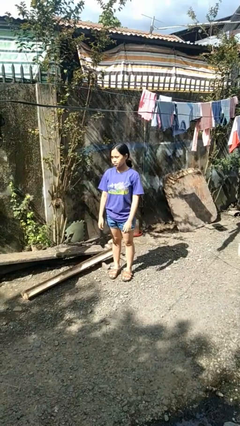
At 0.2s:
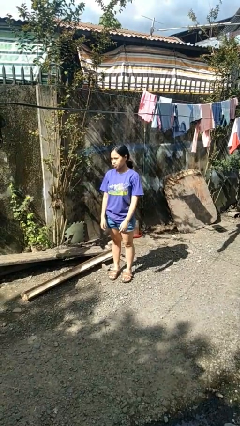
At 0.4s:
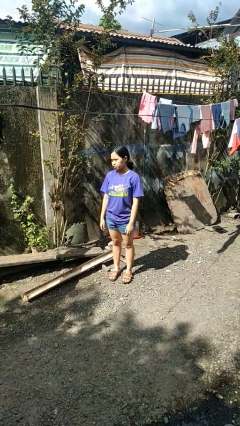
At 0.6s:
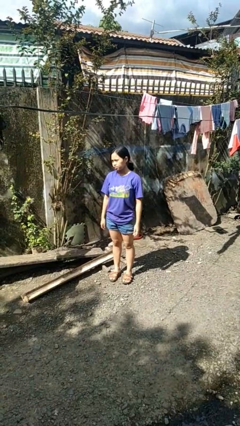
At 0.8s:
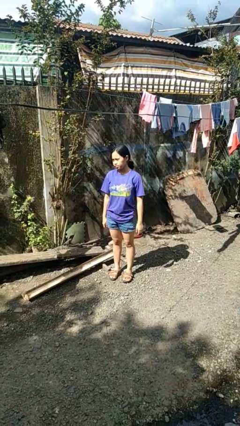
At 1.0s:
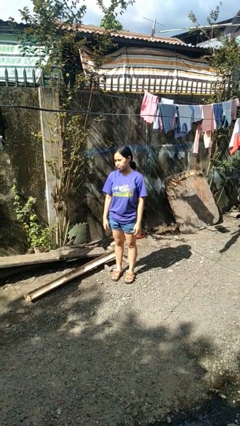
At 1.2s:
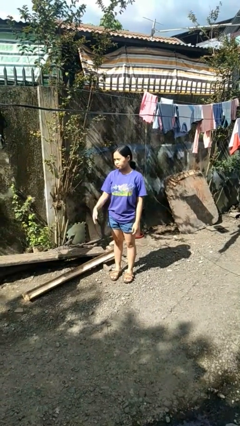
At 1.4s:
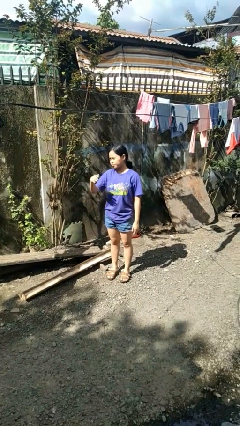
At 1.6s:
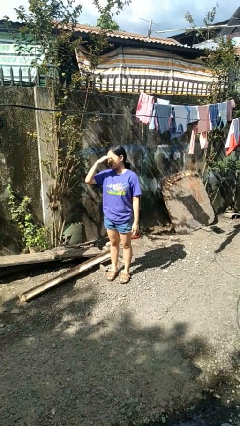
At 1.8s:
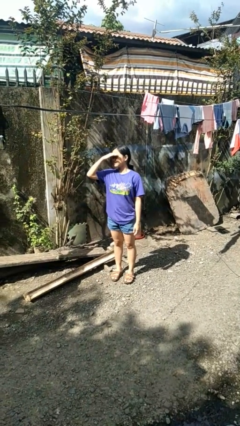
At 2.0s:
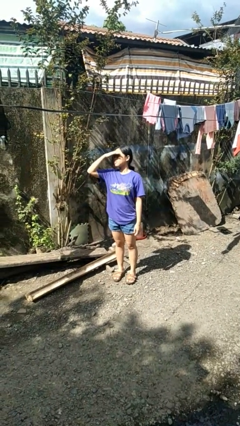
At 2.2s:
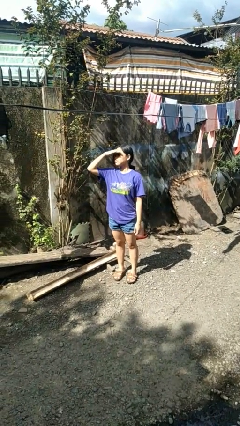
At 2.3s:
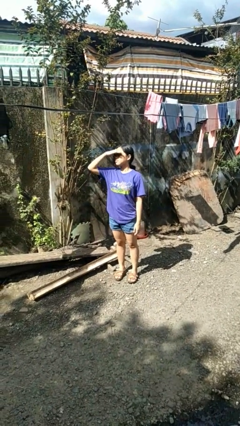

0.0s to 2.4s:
person shades eyes

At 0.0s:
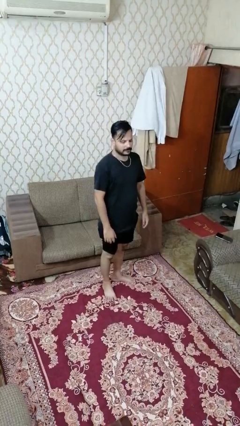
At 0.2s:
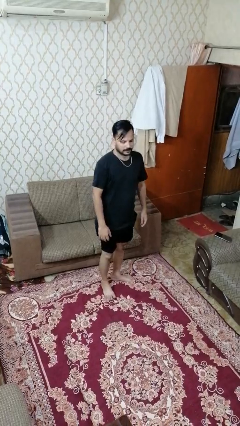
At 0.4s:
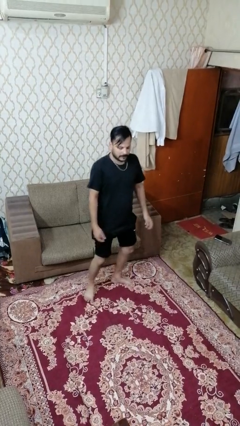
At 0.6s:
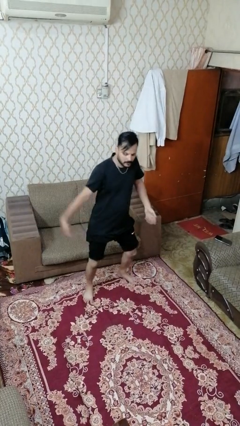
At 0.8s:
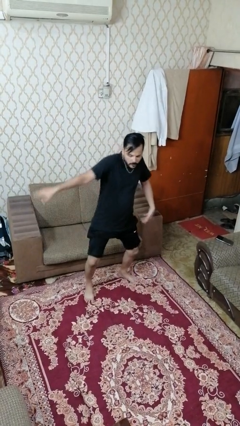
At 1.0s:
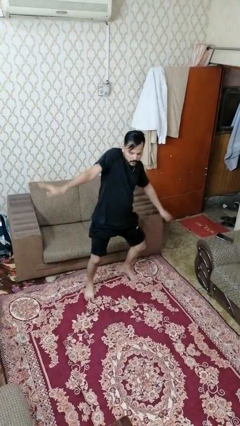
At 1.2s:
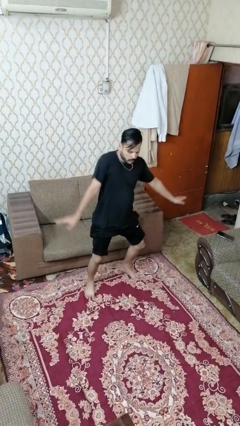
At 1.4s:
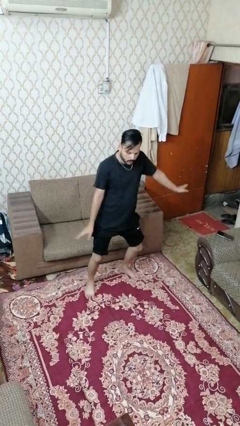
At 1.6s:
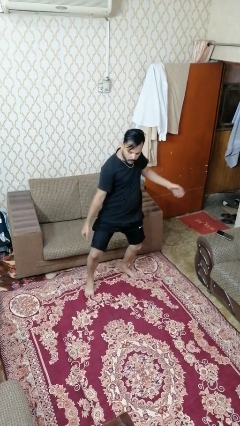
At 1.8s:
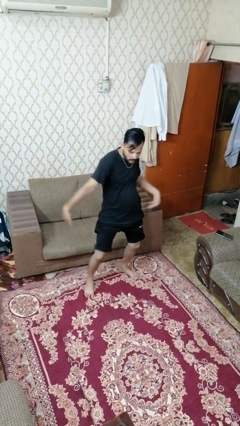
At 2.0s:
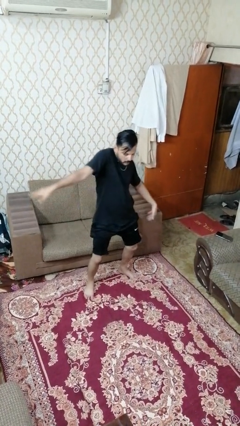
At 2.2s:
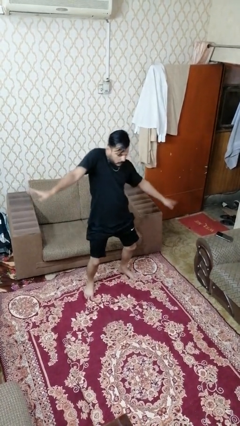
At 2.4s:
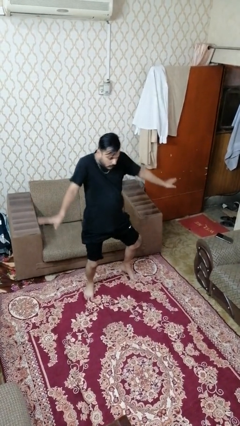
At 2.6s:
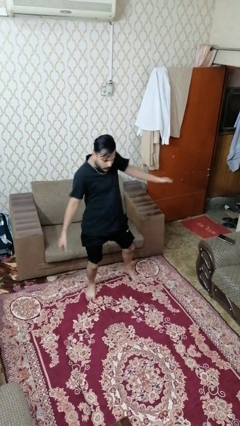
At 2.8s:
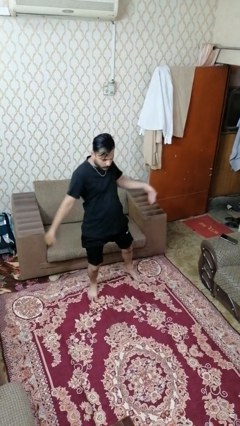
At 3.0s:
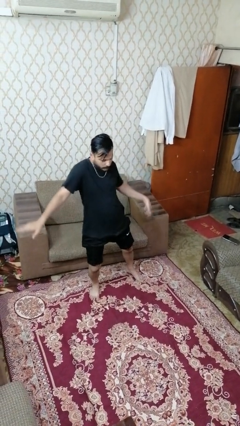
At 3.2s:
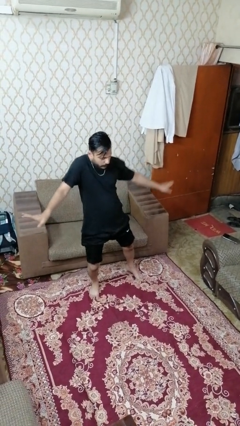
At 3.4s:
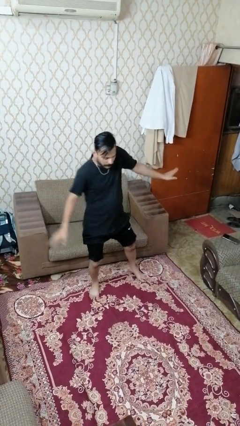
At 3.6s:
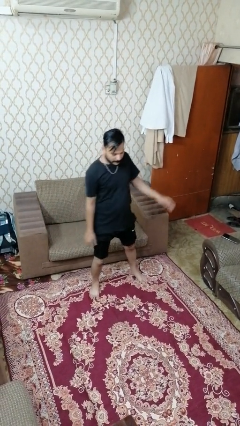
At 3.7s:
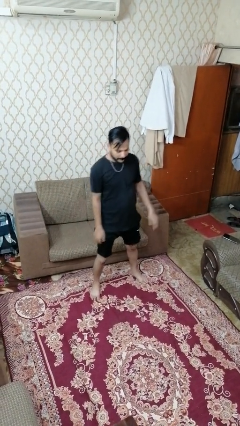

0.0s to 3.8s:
person dances in place

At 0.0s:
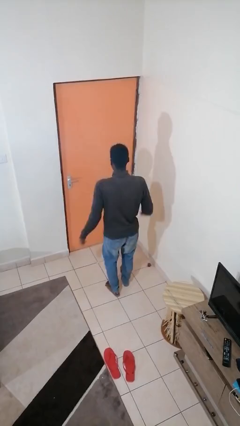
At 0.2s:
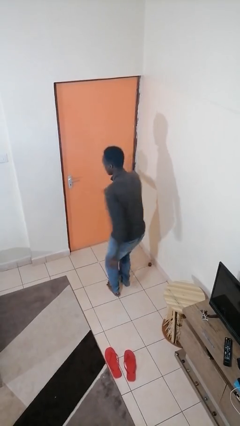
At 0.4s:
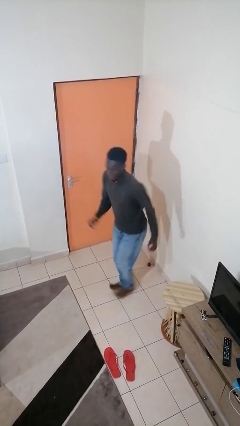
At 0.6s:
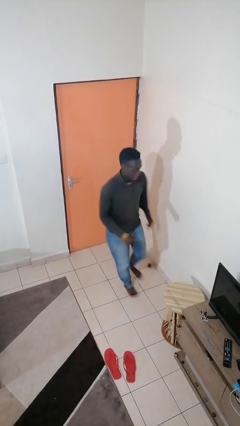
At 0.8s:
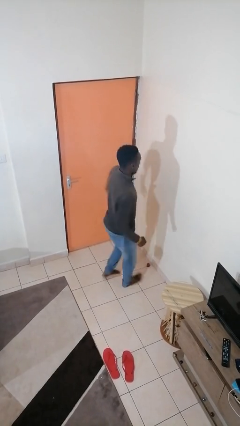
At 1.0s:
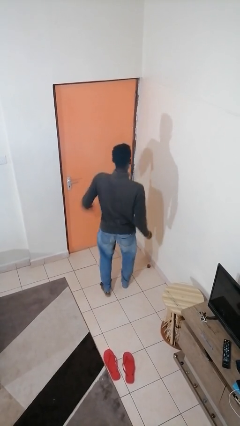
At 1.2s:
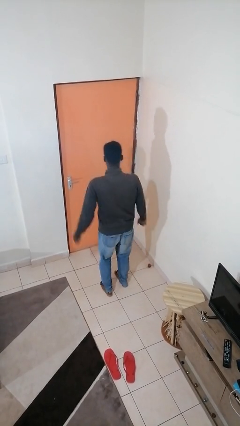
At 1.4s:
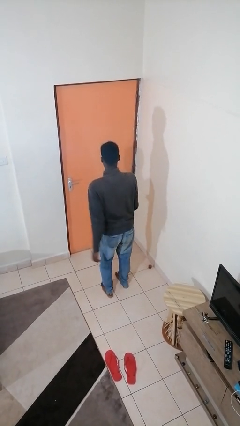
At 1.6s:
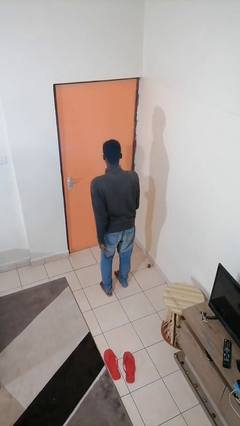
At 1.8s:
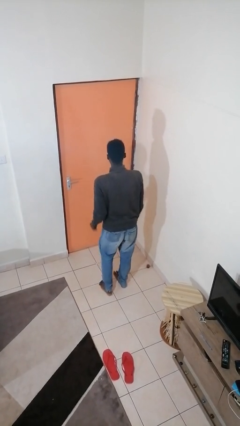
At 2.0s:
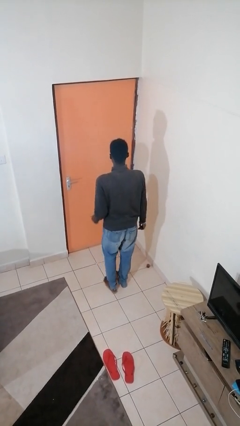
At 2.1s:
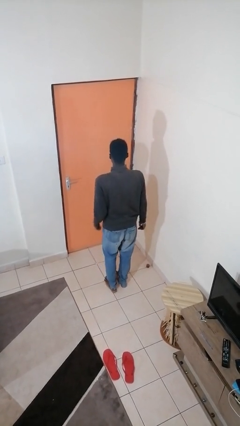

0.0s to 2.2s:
person twirls

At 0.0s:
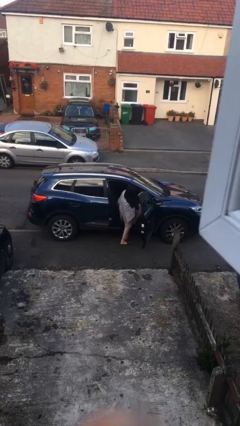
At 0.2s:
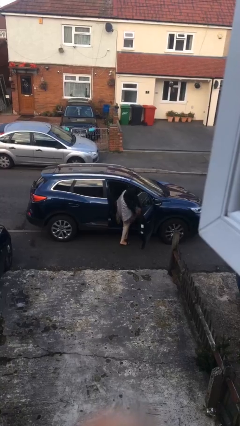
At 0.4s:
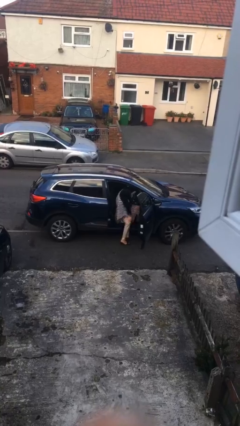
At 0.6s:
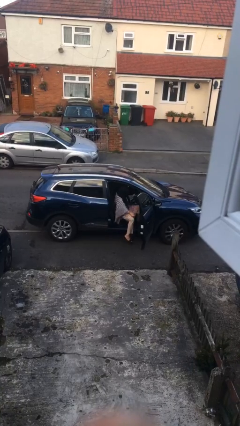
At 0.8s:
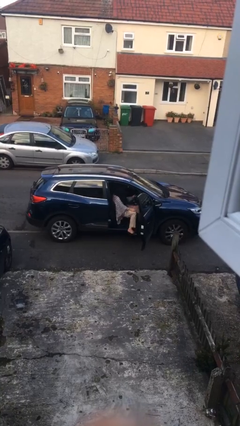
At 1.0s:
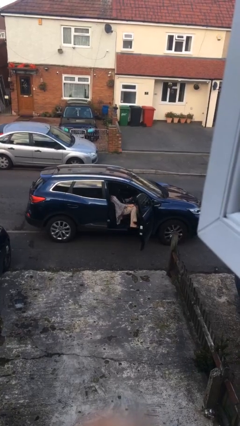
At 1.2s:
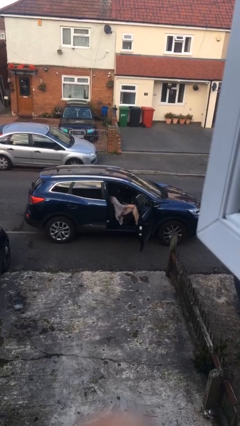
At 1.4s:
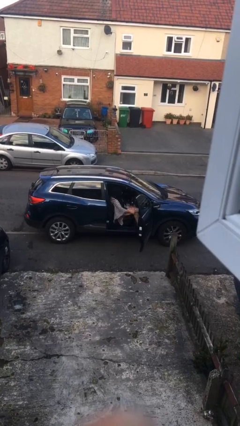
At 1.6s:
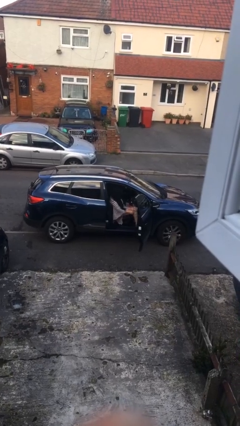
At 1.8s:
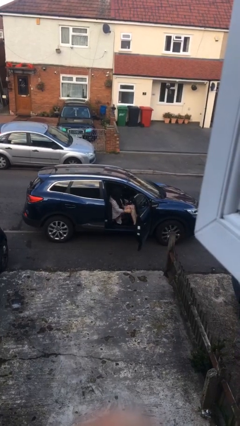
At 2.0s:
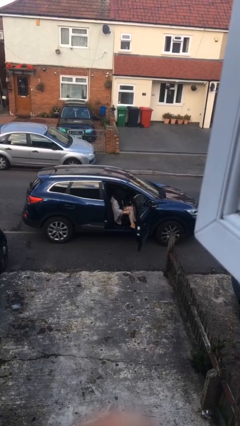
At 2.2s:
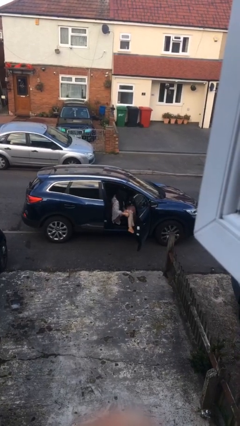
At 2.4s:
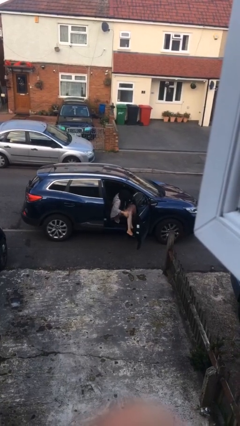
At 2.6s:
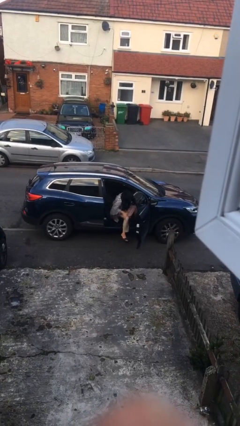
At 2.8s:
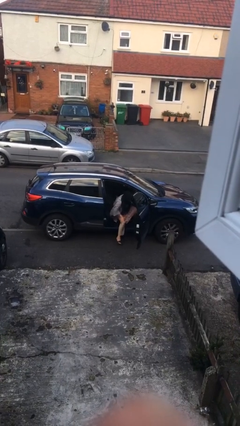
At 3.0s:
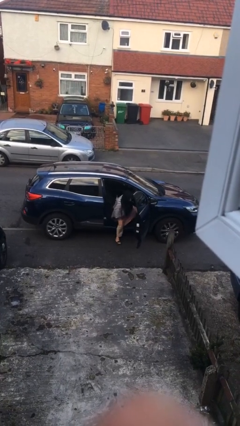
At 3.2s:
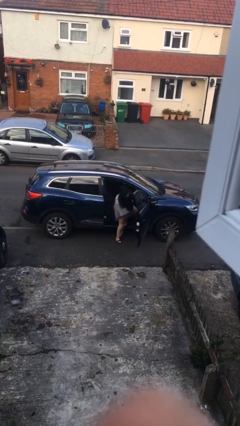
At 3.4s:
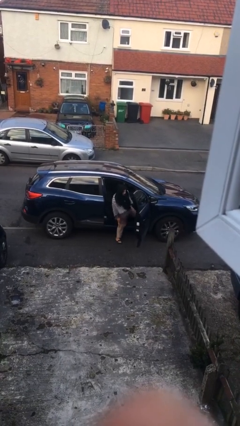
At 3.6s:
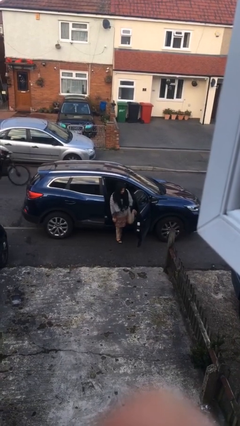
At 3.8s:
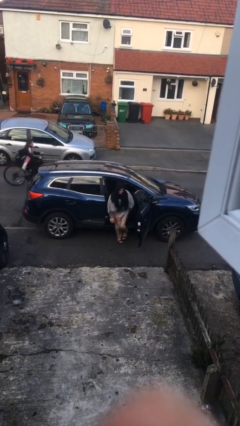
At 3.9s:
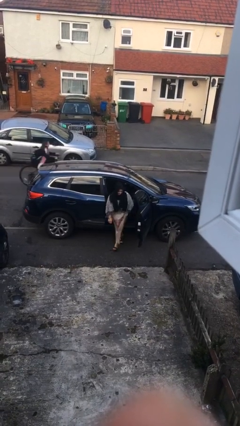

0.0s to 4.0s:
person exits car

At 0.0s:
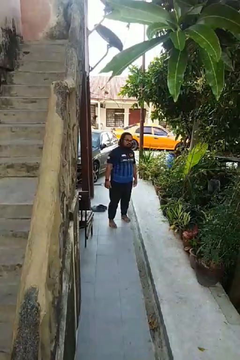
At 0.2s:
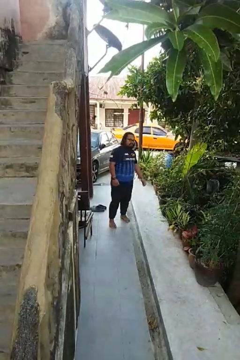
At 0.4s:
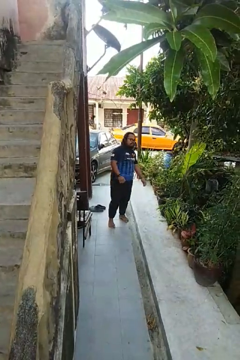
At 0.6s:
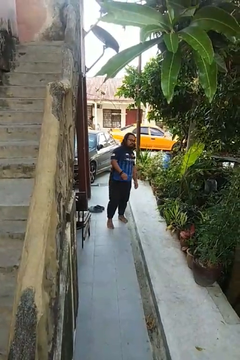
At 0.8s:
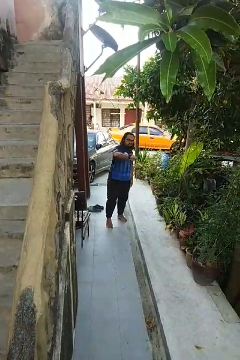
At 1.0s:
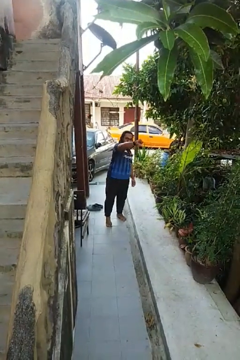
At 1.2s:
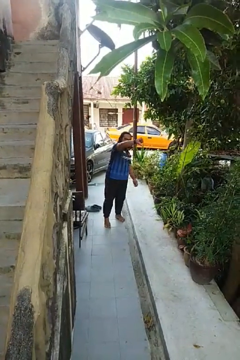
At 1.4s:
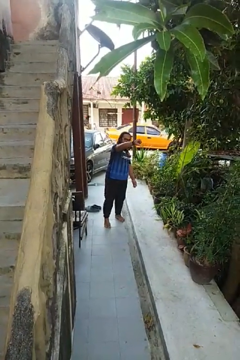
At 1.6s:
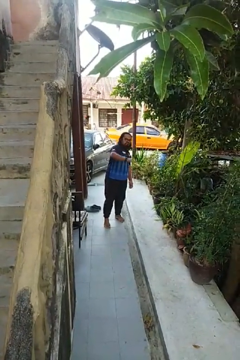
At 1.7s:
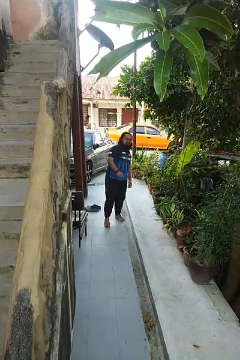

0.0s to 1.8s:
person gestures thumbs down

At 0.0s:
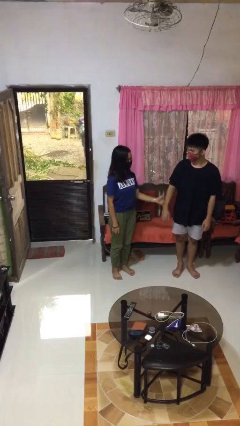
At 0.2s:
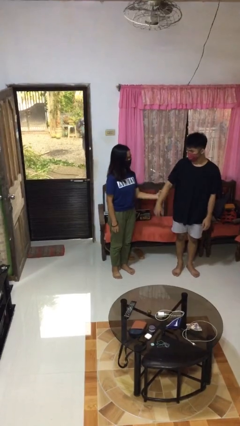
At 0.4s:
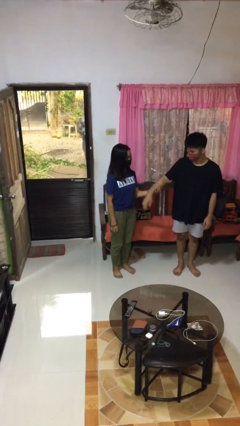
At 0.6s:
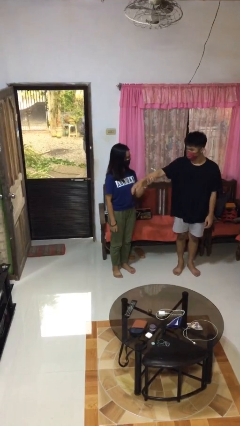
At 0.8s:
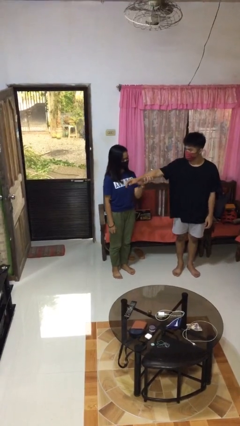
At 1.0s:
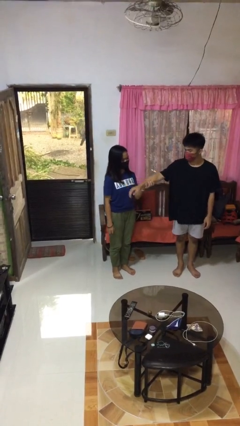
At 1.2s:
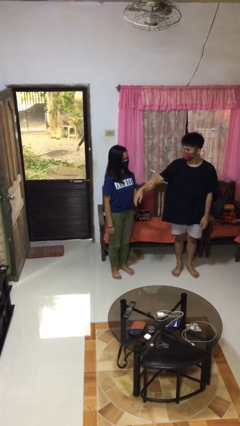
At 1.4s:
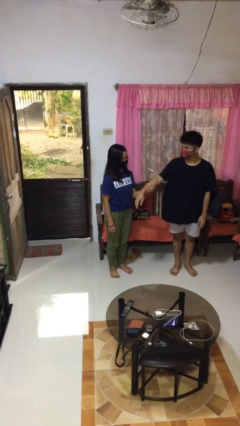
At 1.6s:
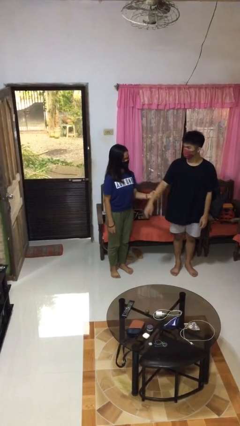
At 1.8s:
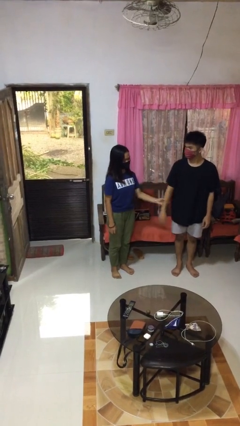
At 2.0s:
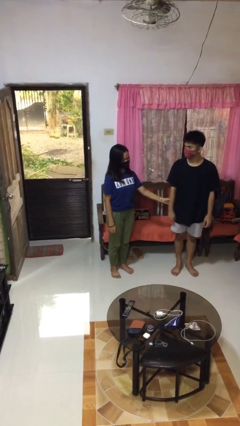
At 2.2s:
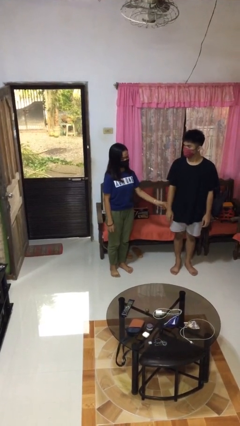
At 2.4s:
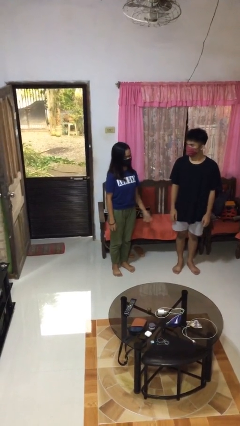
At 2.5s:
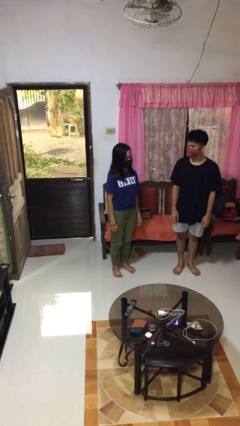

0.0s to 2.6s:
person grabs person by forearm

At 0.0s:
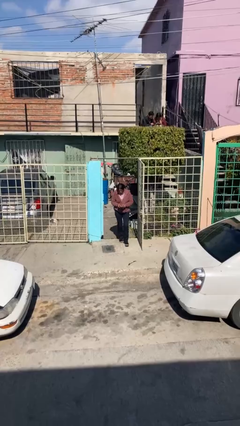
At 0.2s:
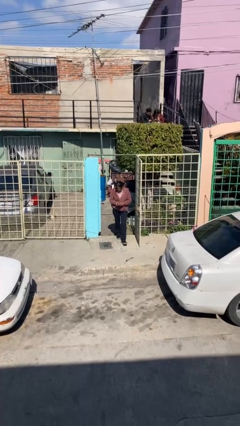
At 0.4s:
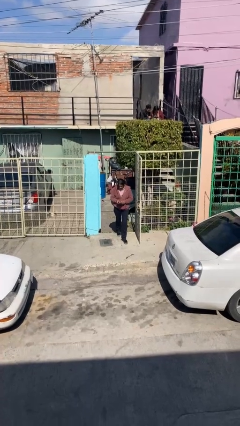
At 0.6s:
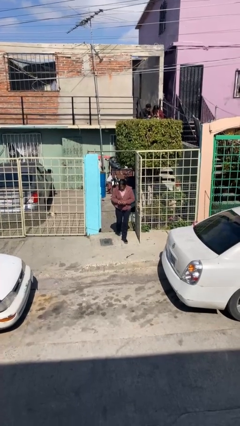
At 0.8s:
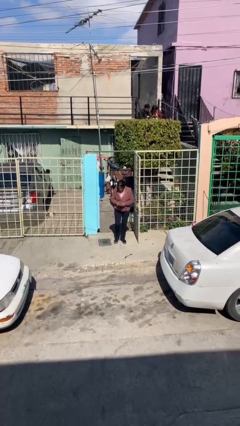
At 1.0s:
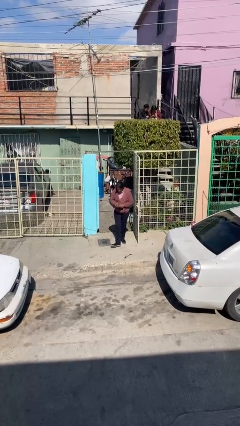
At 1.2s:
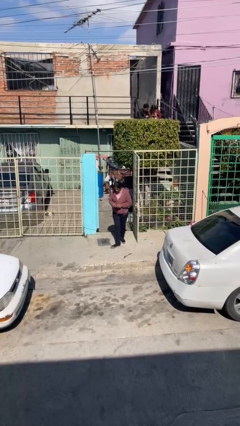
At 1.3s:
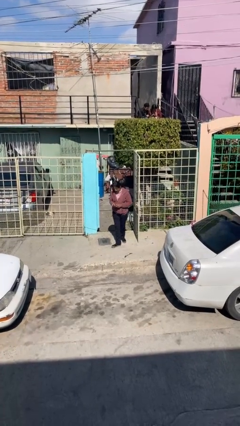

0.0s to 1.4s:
person enters scene through structure
